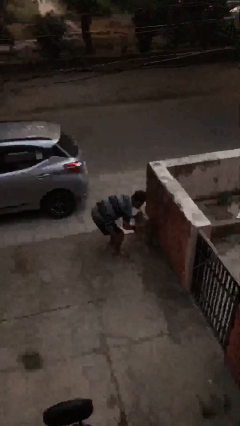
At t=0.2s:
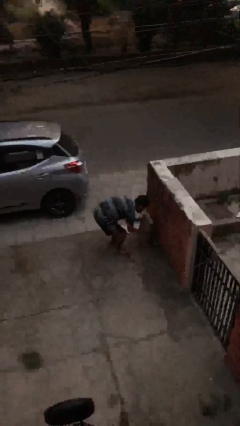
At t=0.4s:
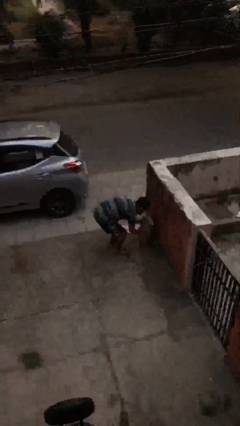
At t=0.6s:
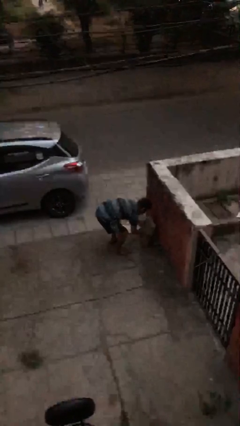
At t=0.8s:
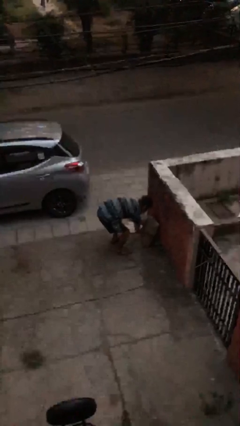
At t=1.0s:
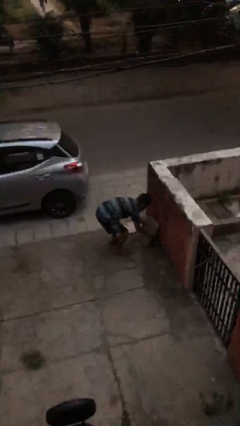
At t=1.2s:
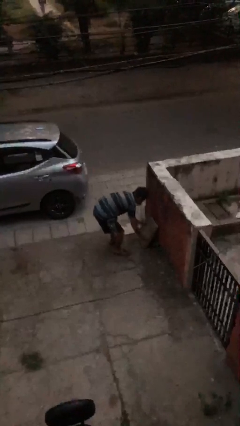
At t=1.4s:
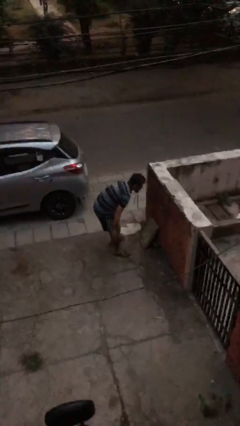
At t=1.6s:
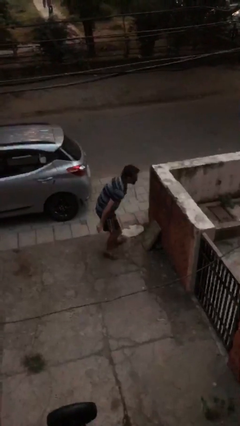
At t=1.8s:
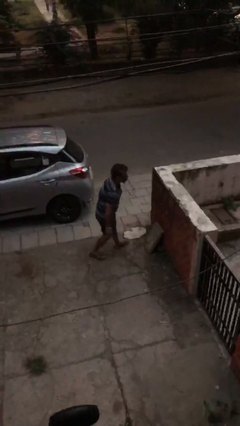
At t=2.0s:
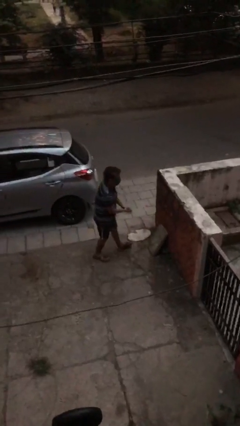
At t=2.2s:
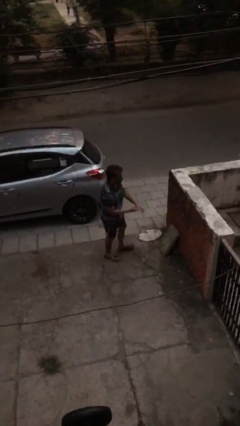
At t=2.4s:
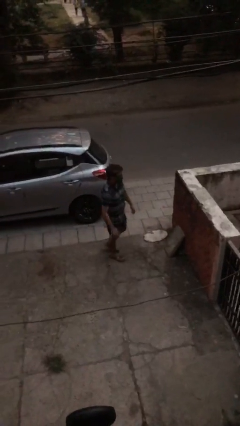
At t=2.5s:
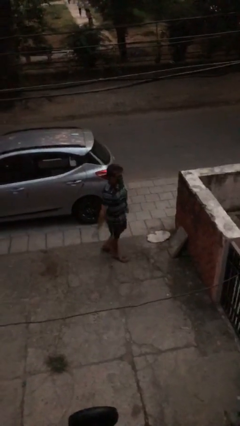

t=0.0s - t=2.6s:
person puts down object on floor

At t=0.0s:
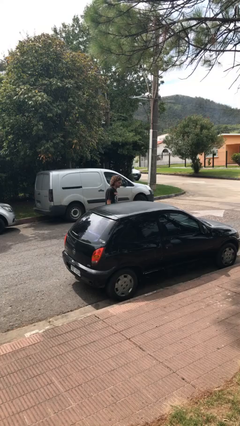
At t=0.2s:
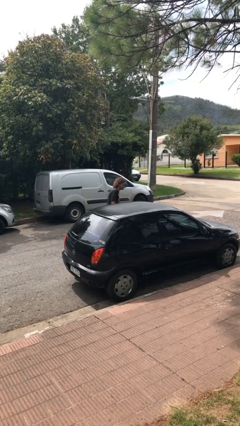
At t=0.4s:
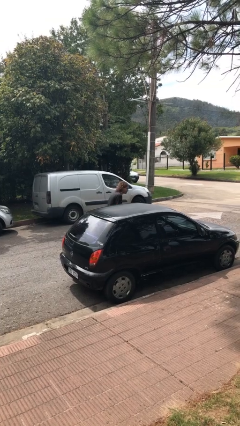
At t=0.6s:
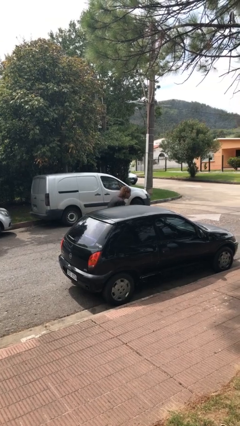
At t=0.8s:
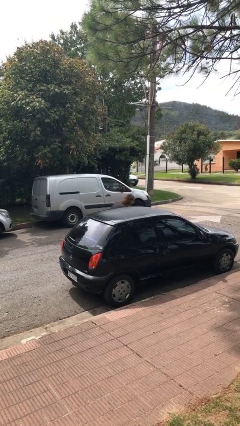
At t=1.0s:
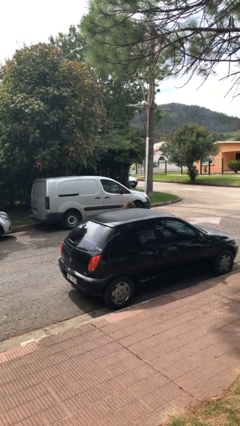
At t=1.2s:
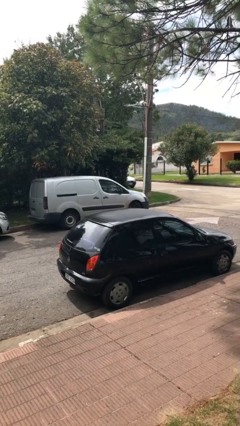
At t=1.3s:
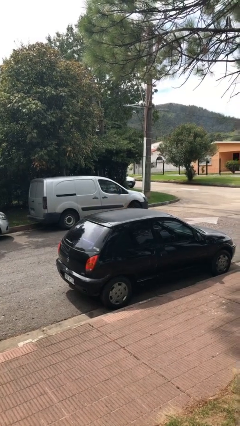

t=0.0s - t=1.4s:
person enters car

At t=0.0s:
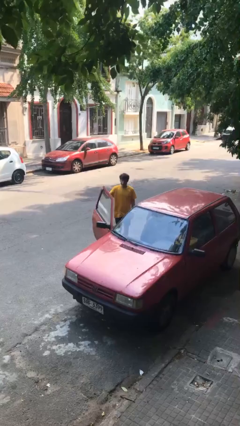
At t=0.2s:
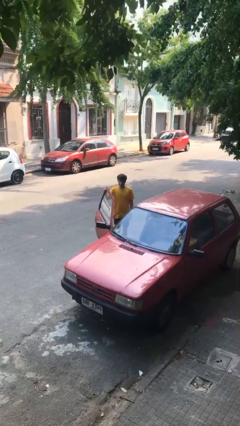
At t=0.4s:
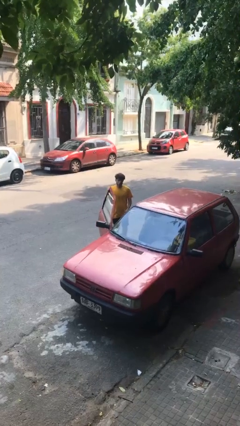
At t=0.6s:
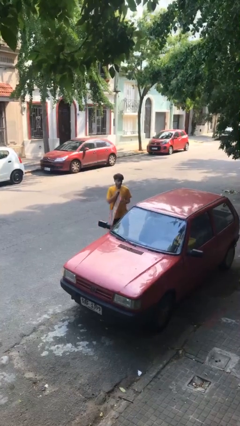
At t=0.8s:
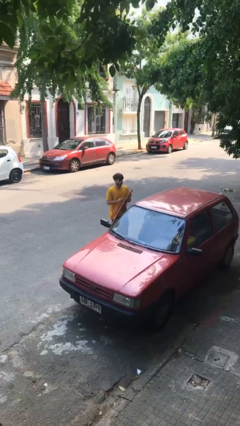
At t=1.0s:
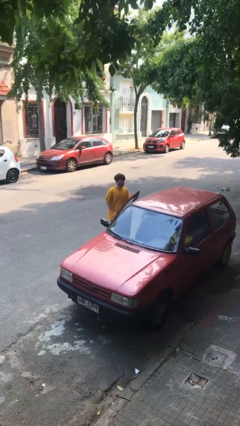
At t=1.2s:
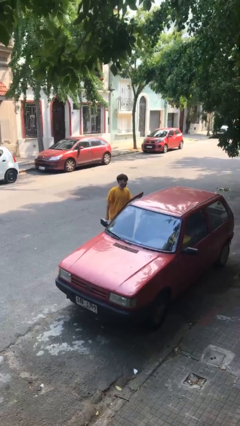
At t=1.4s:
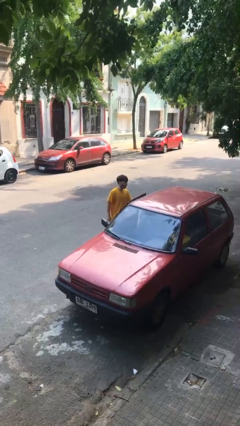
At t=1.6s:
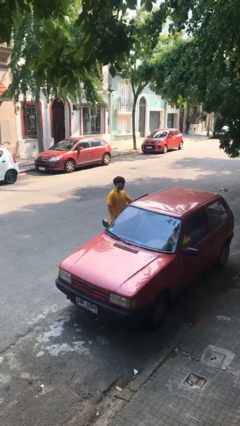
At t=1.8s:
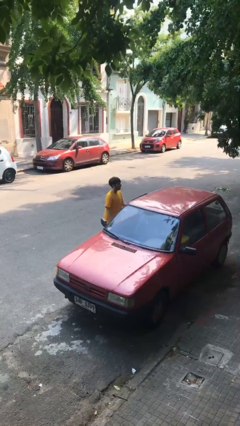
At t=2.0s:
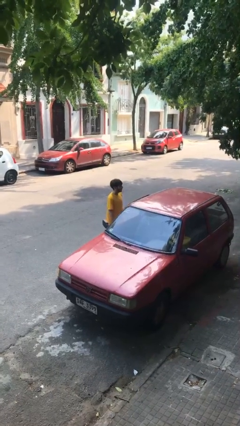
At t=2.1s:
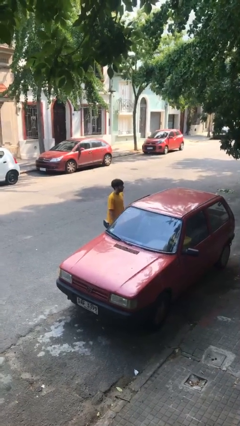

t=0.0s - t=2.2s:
person closes car door

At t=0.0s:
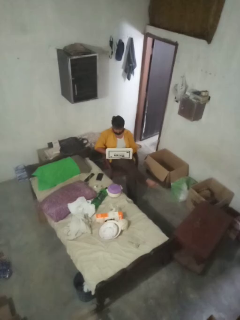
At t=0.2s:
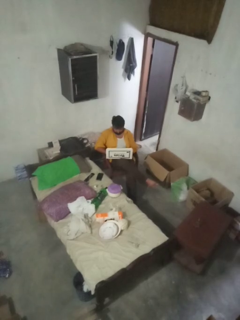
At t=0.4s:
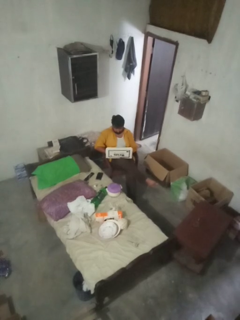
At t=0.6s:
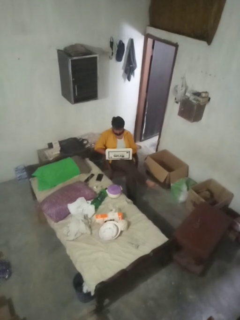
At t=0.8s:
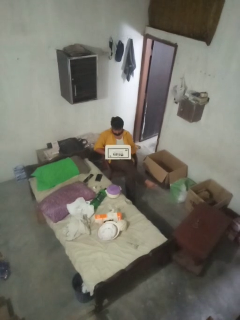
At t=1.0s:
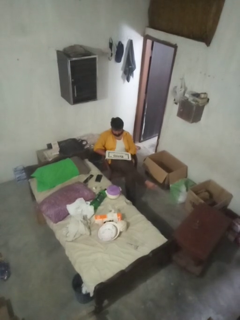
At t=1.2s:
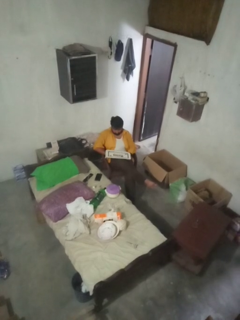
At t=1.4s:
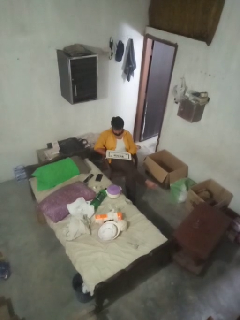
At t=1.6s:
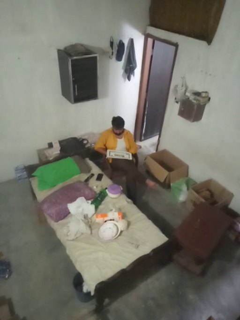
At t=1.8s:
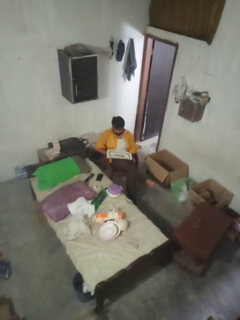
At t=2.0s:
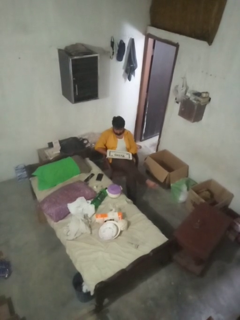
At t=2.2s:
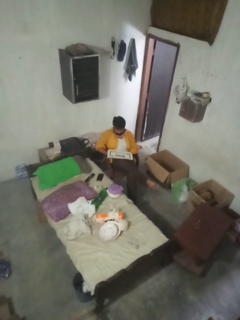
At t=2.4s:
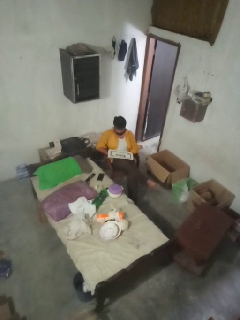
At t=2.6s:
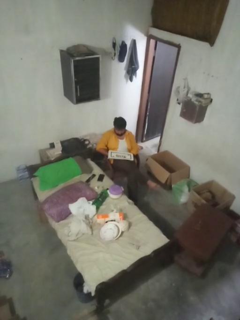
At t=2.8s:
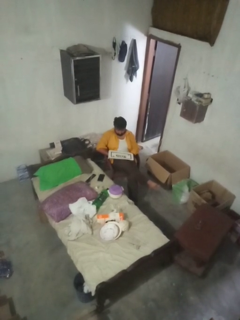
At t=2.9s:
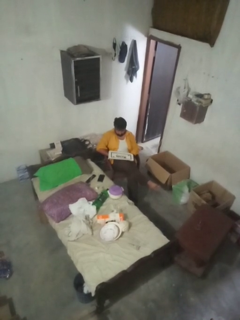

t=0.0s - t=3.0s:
person closes laptop

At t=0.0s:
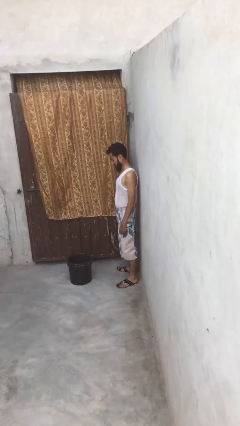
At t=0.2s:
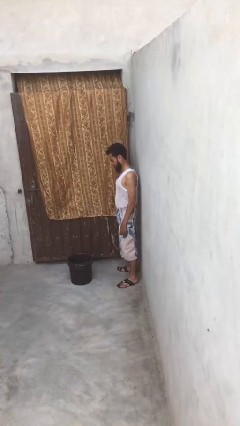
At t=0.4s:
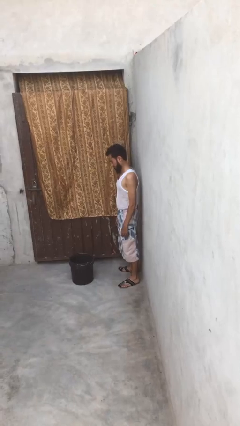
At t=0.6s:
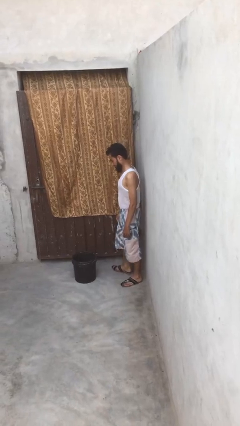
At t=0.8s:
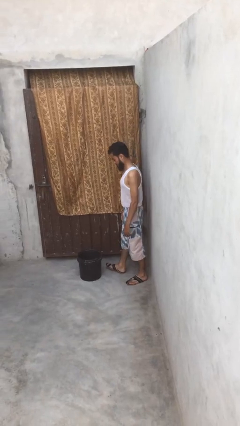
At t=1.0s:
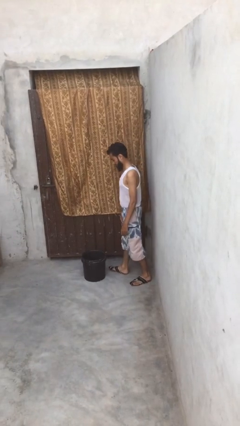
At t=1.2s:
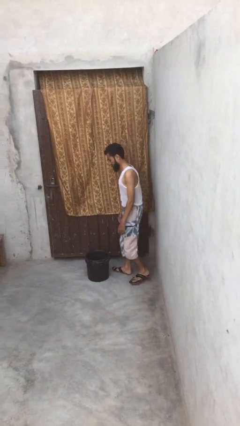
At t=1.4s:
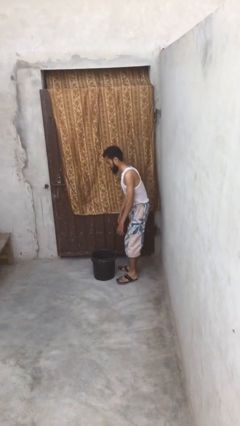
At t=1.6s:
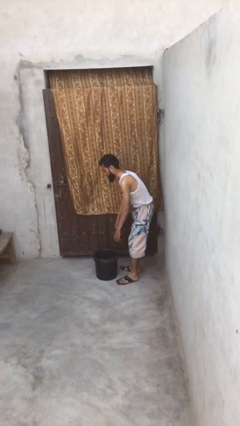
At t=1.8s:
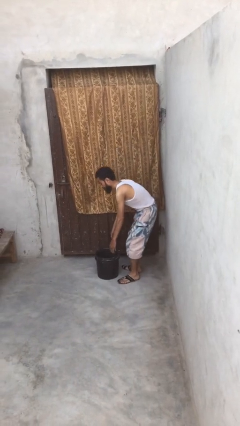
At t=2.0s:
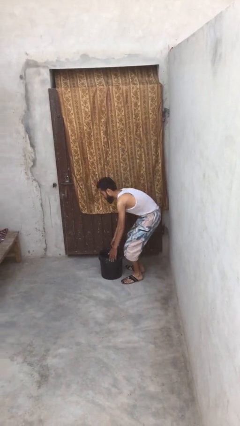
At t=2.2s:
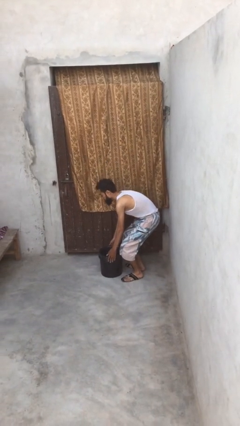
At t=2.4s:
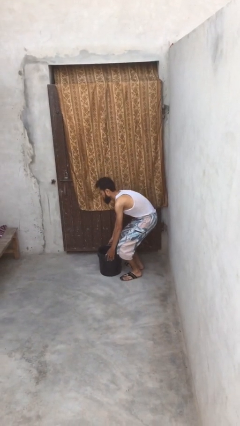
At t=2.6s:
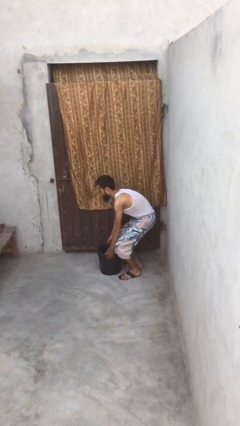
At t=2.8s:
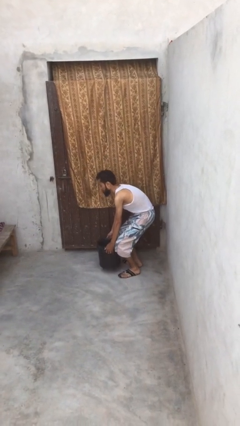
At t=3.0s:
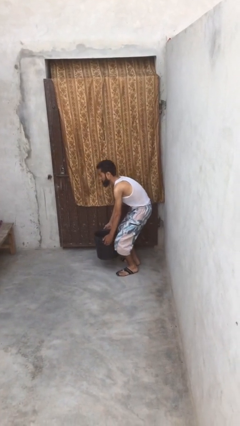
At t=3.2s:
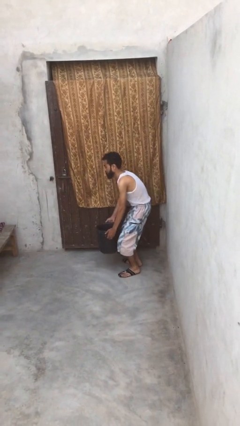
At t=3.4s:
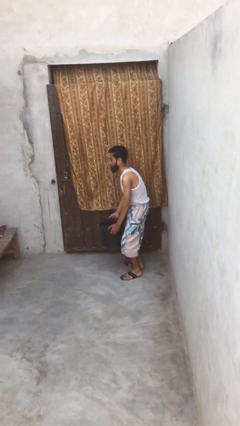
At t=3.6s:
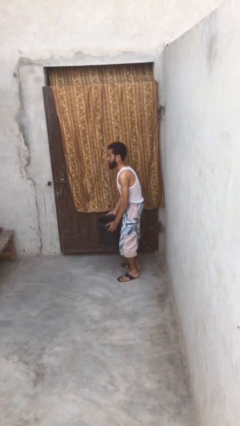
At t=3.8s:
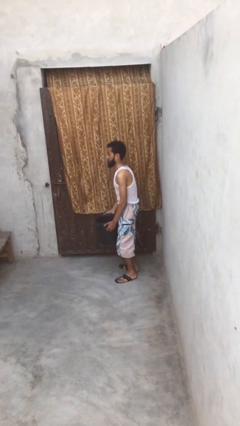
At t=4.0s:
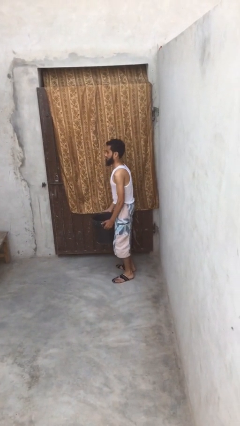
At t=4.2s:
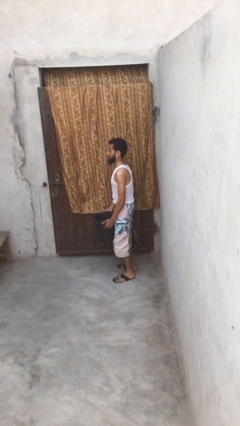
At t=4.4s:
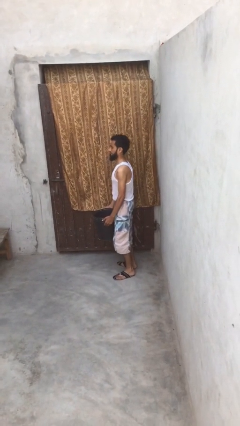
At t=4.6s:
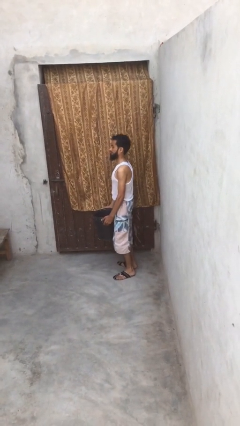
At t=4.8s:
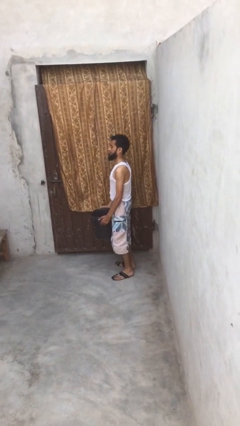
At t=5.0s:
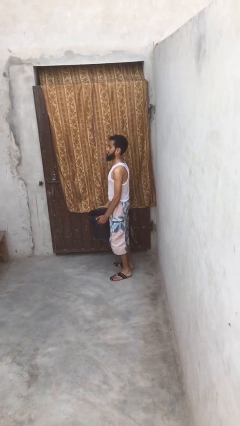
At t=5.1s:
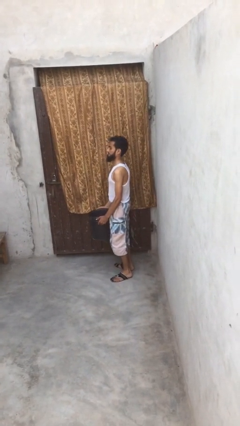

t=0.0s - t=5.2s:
person picks up object from floor

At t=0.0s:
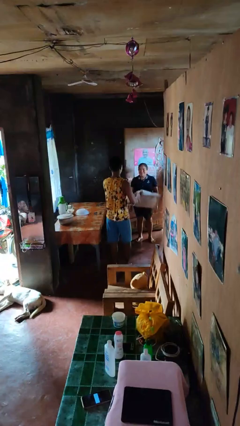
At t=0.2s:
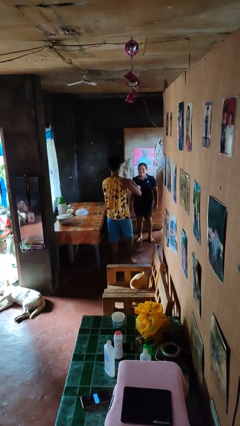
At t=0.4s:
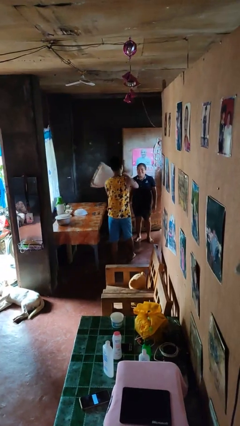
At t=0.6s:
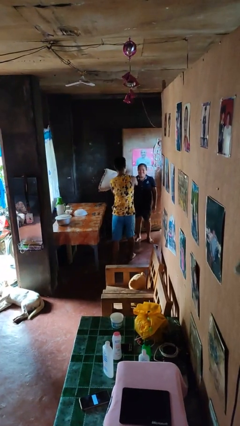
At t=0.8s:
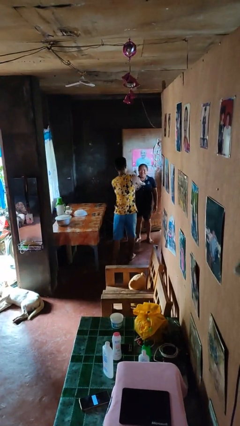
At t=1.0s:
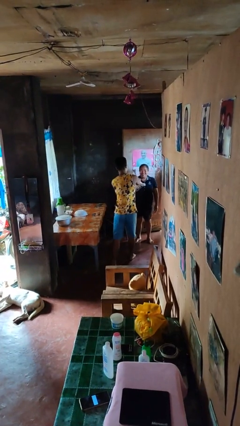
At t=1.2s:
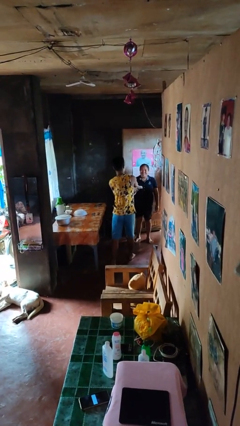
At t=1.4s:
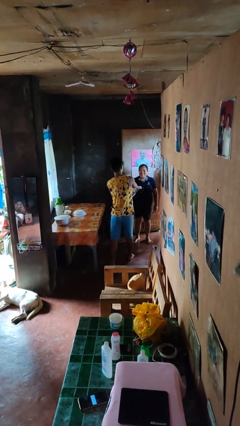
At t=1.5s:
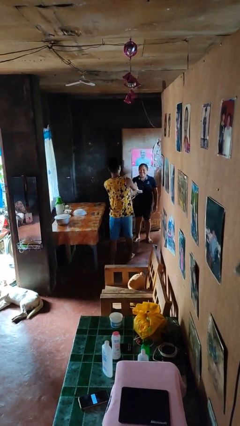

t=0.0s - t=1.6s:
person hits person with pillow

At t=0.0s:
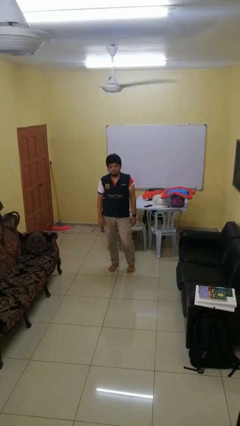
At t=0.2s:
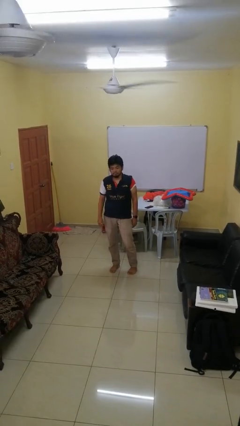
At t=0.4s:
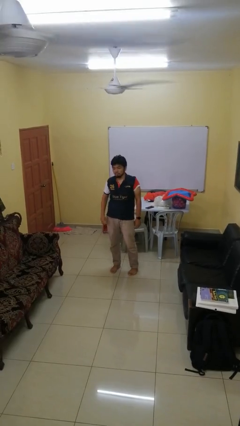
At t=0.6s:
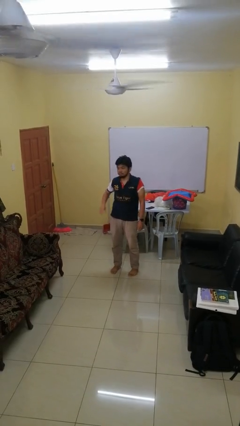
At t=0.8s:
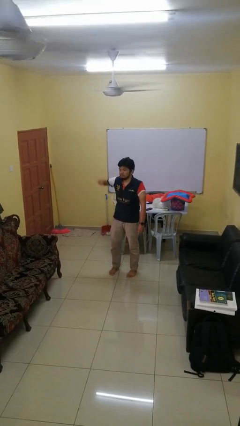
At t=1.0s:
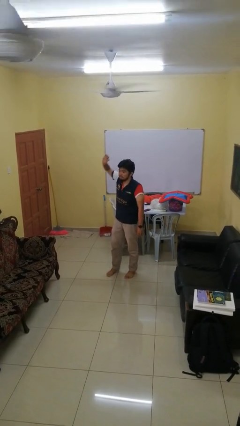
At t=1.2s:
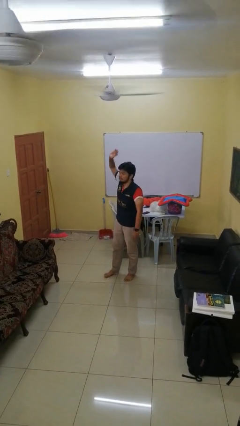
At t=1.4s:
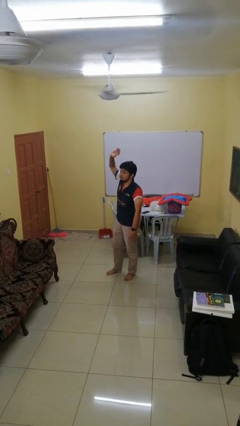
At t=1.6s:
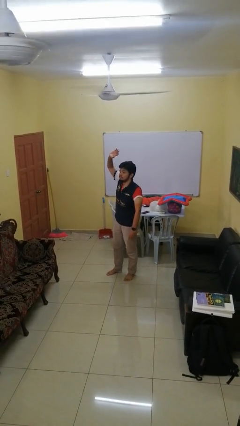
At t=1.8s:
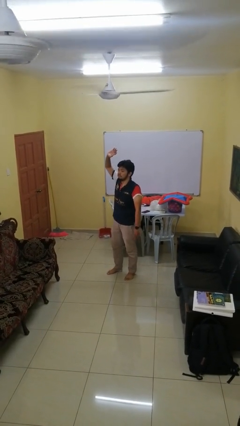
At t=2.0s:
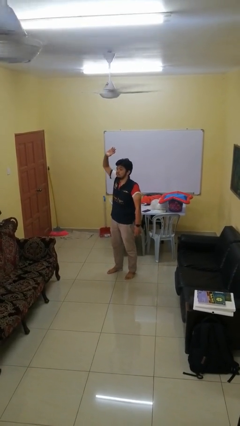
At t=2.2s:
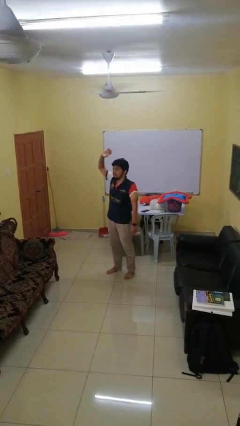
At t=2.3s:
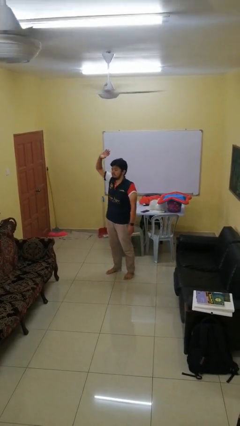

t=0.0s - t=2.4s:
person gestures raise hand
